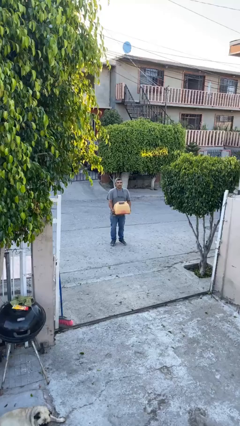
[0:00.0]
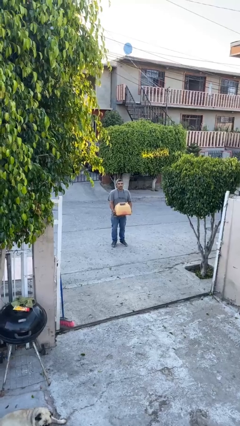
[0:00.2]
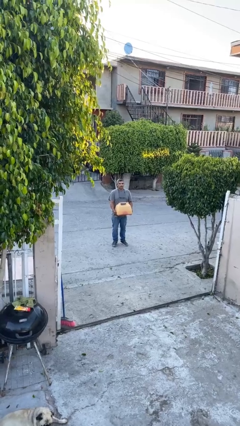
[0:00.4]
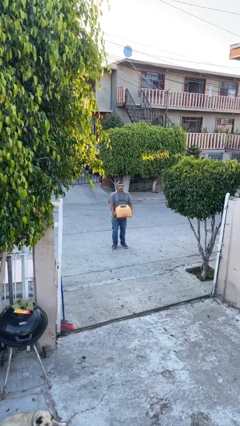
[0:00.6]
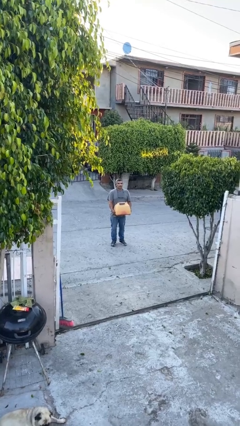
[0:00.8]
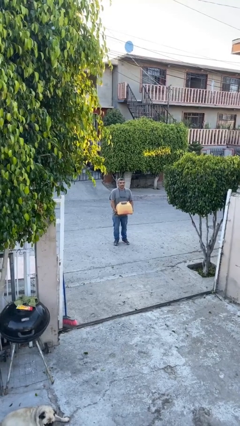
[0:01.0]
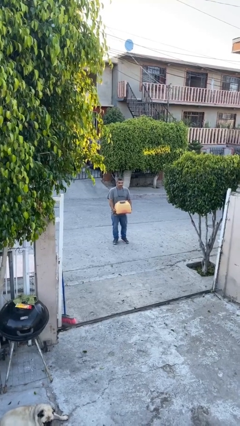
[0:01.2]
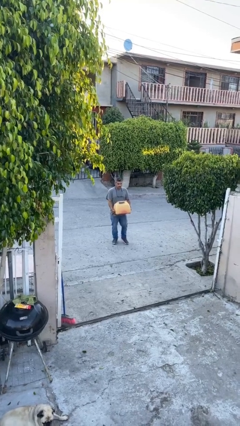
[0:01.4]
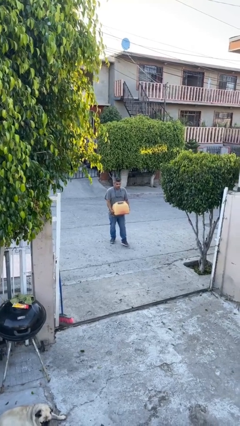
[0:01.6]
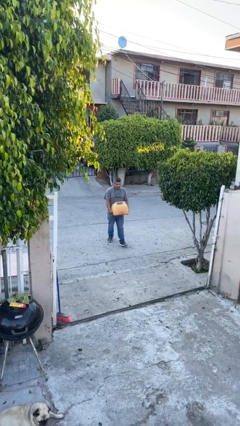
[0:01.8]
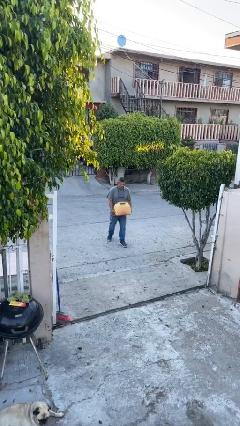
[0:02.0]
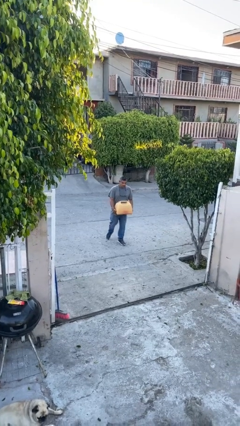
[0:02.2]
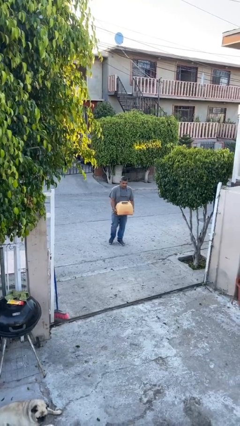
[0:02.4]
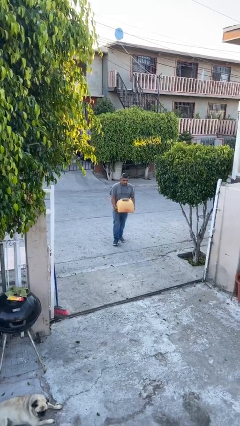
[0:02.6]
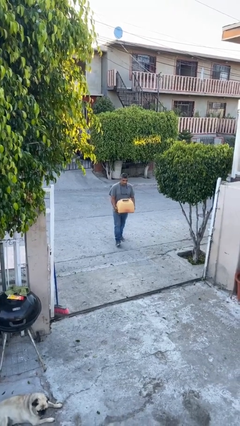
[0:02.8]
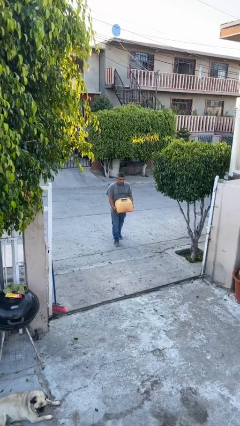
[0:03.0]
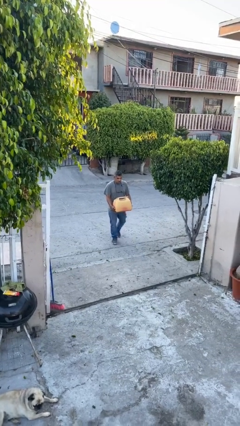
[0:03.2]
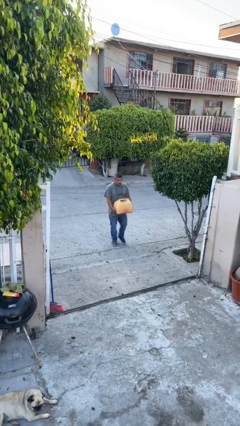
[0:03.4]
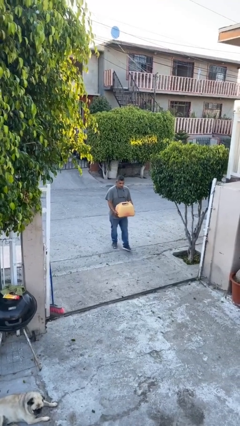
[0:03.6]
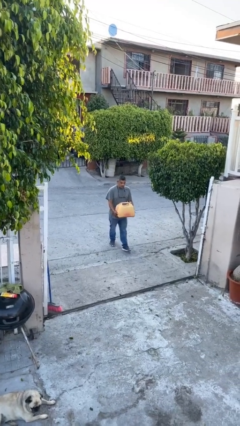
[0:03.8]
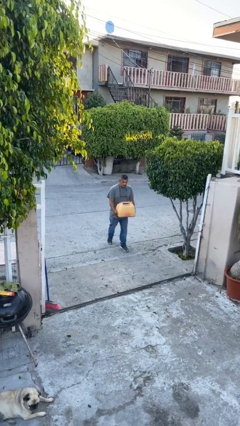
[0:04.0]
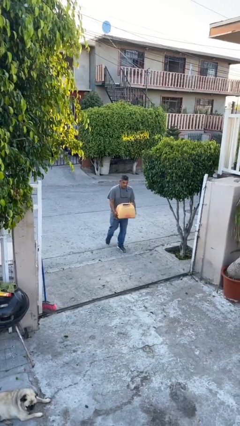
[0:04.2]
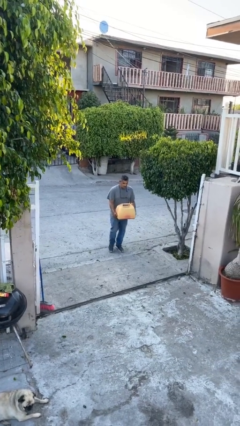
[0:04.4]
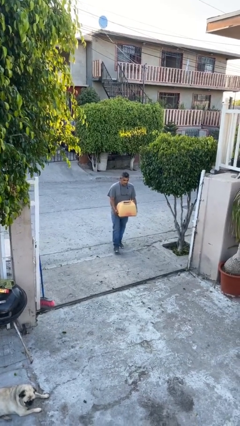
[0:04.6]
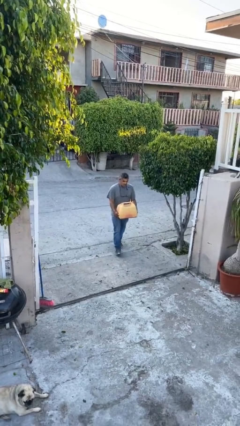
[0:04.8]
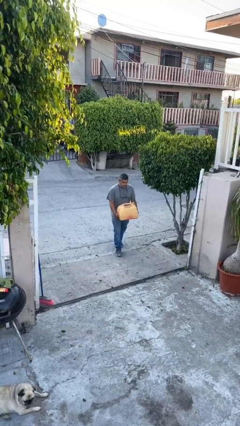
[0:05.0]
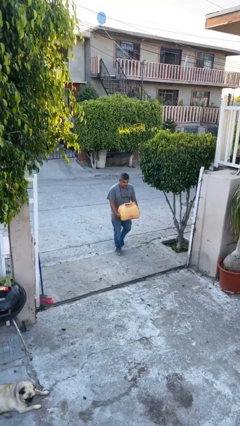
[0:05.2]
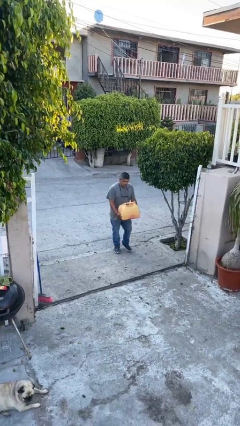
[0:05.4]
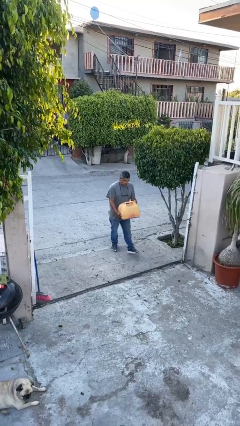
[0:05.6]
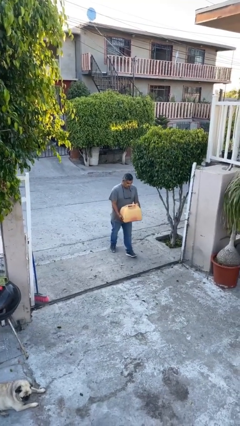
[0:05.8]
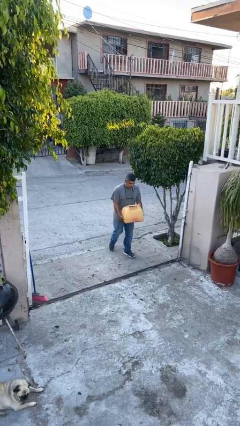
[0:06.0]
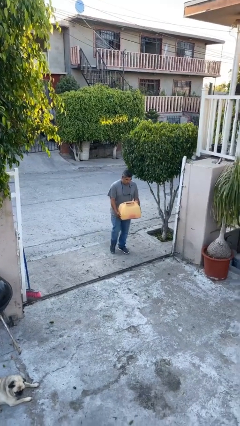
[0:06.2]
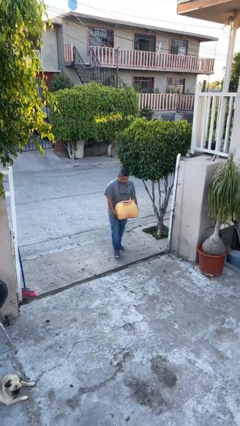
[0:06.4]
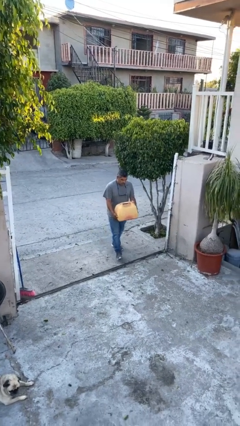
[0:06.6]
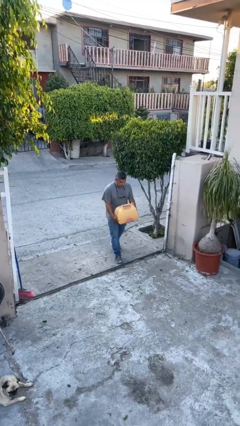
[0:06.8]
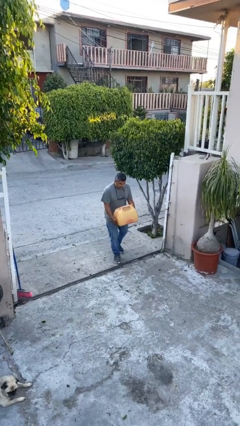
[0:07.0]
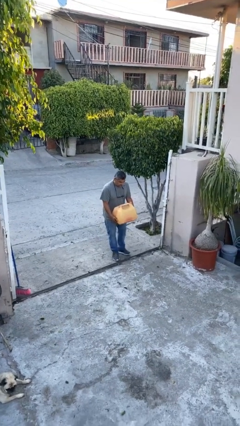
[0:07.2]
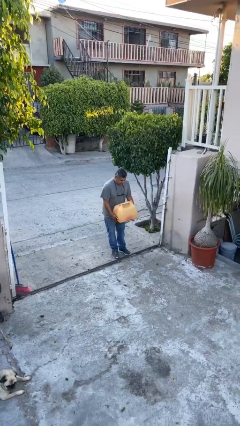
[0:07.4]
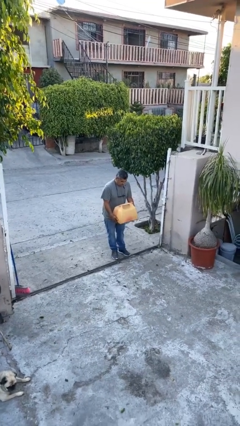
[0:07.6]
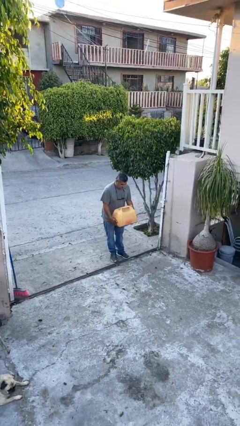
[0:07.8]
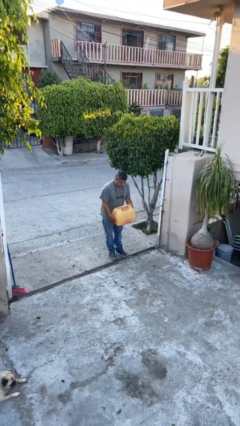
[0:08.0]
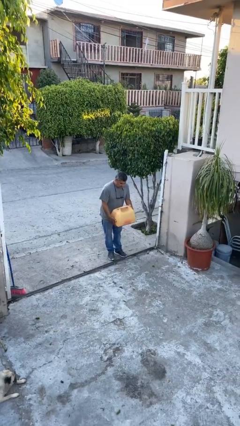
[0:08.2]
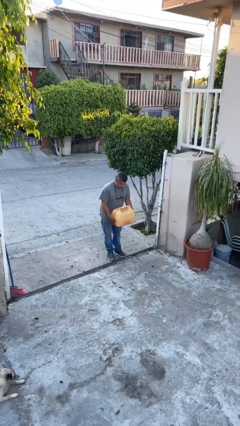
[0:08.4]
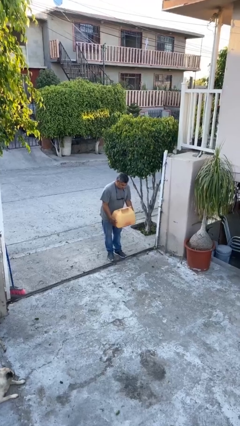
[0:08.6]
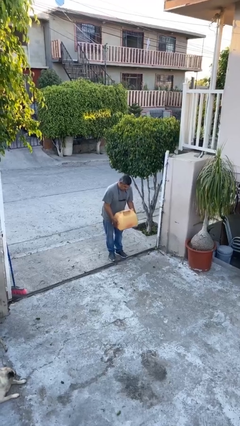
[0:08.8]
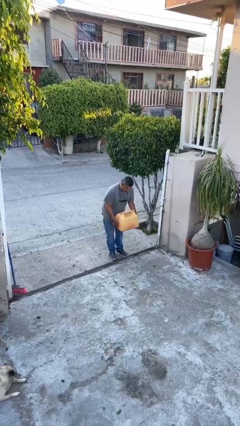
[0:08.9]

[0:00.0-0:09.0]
person carries heavy object

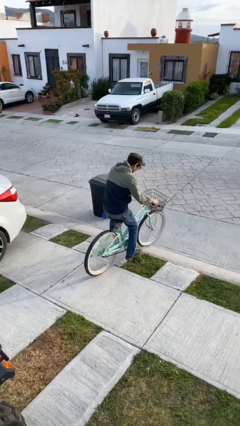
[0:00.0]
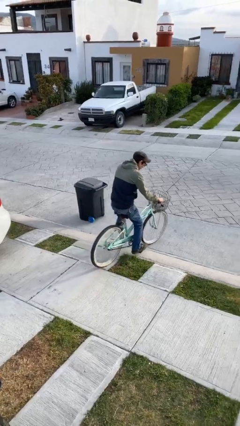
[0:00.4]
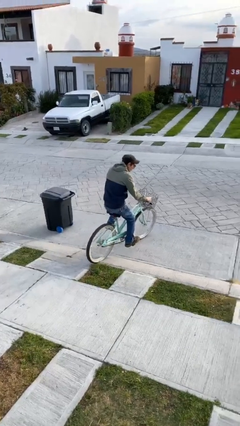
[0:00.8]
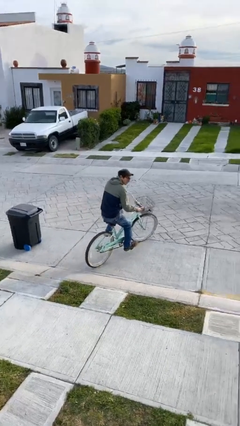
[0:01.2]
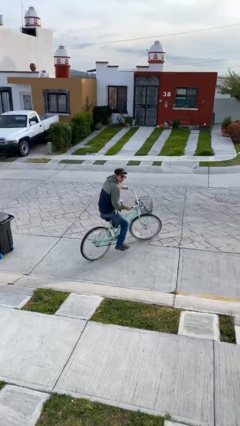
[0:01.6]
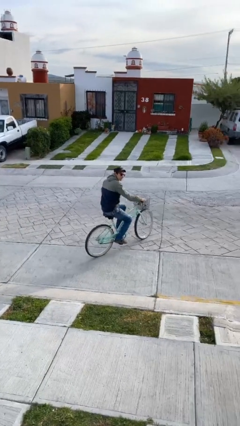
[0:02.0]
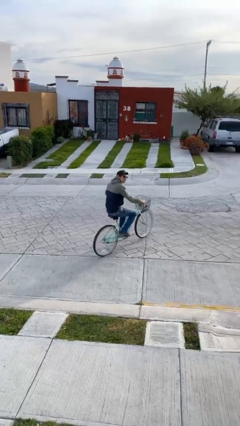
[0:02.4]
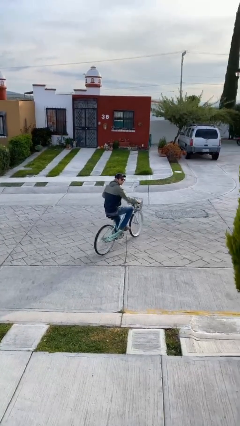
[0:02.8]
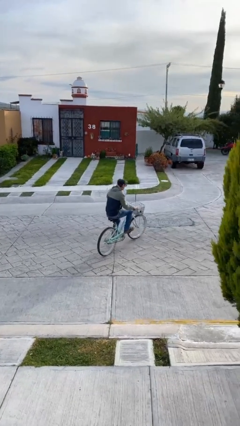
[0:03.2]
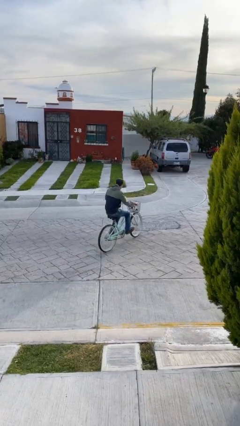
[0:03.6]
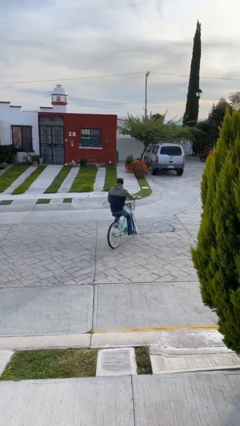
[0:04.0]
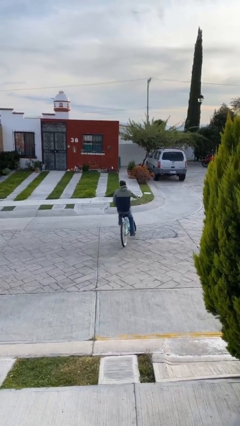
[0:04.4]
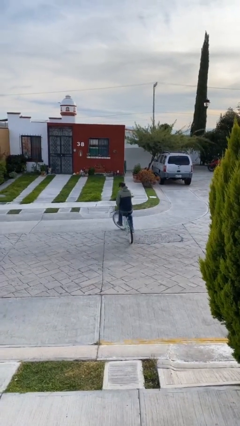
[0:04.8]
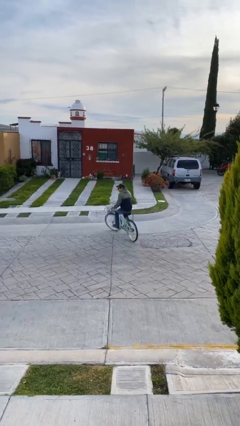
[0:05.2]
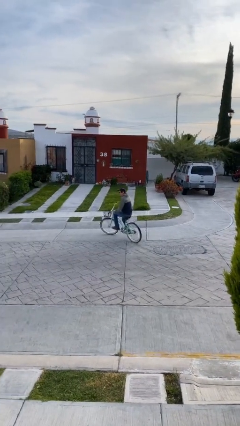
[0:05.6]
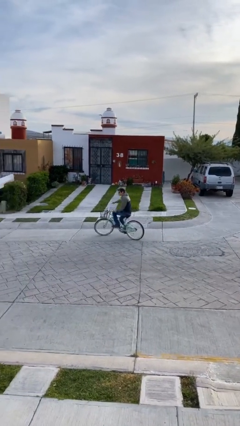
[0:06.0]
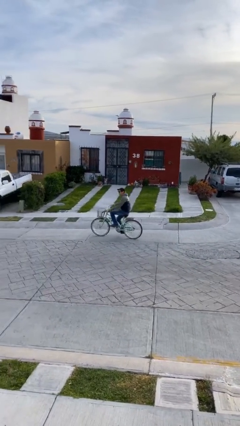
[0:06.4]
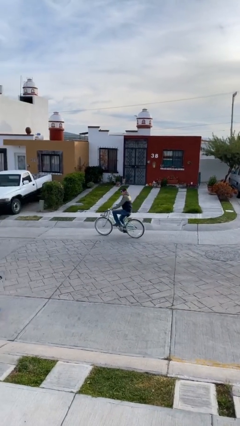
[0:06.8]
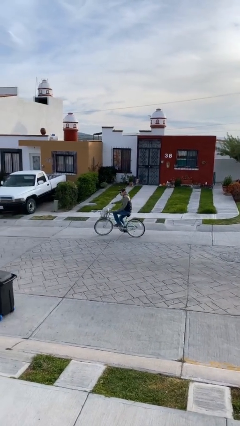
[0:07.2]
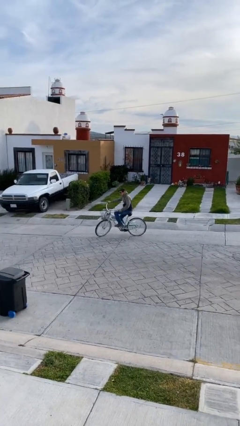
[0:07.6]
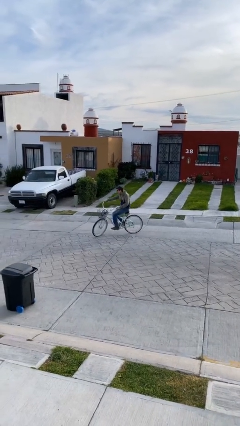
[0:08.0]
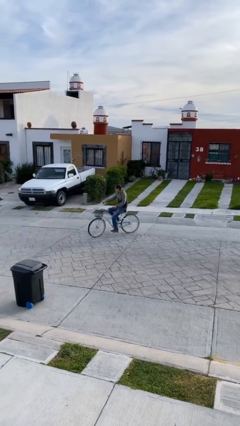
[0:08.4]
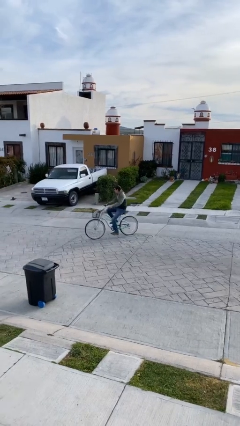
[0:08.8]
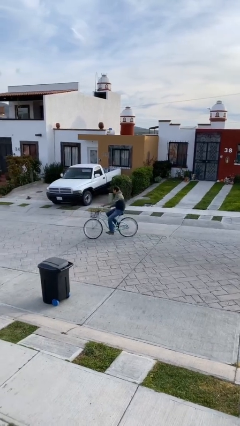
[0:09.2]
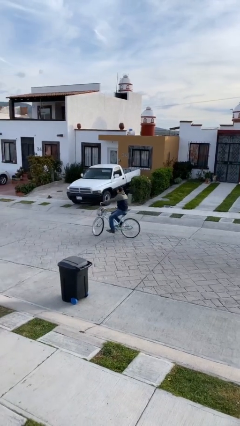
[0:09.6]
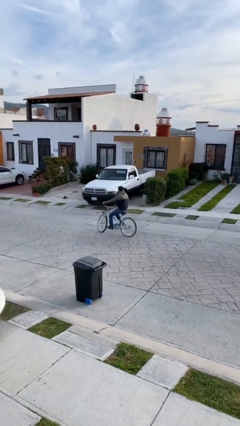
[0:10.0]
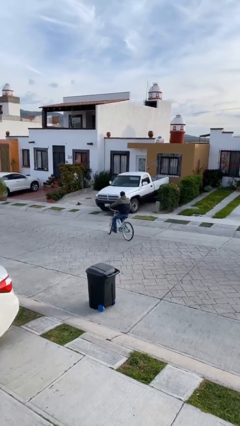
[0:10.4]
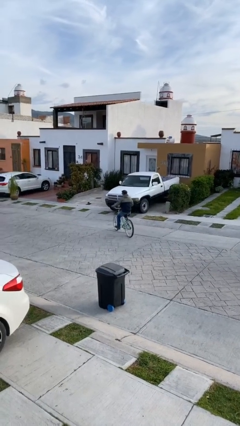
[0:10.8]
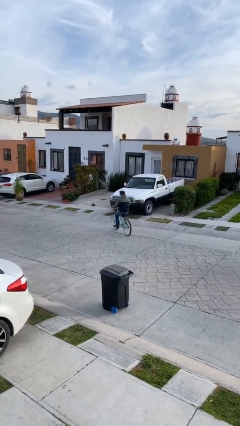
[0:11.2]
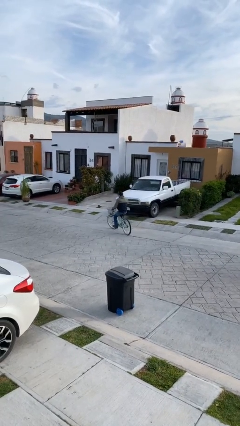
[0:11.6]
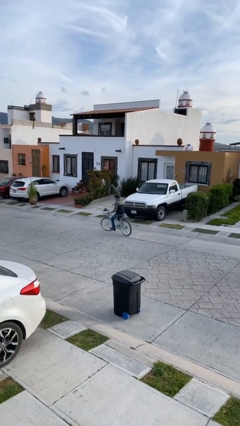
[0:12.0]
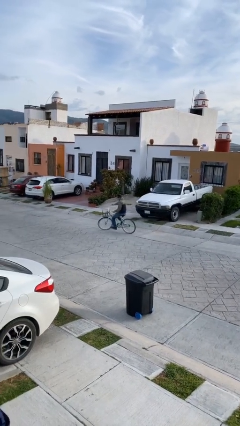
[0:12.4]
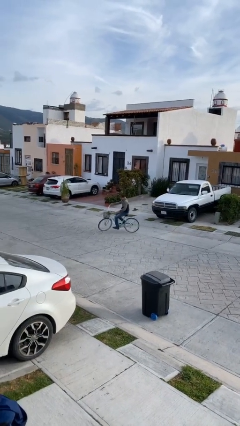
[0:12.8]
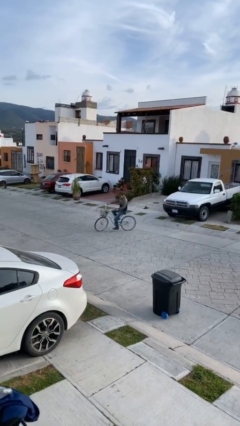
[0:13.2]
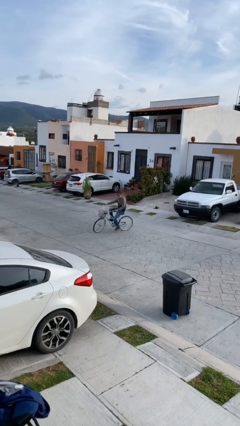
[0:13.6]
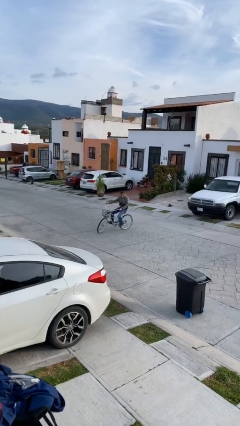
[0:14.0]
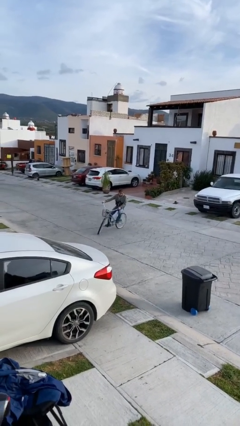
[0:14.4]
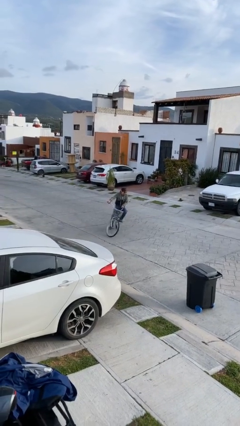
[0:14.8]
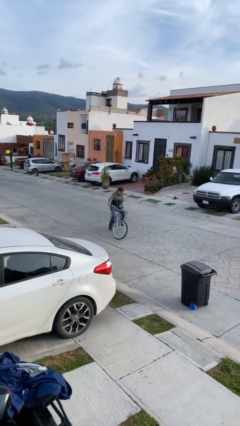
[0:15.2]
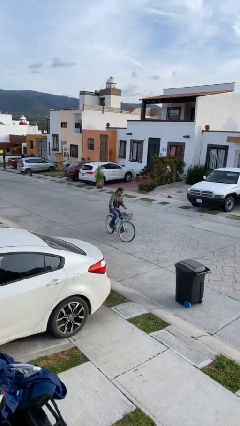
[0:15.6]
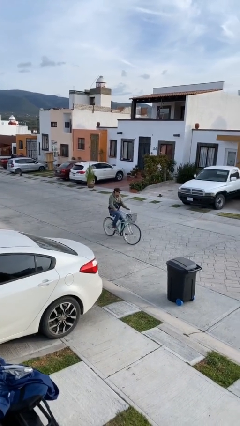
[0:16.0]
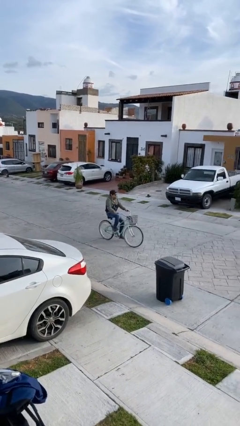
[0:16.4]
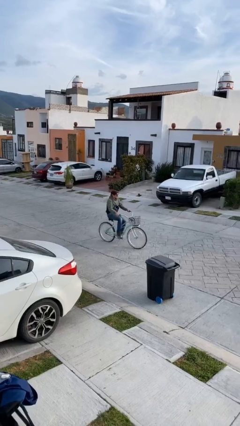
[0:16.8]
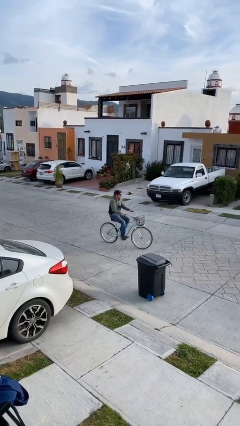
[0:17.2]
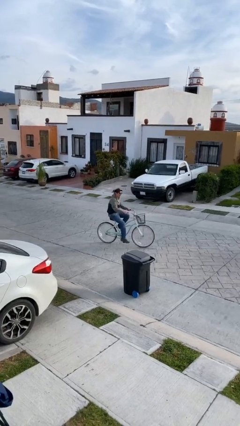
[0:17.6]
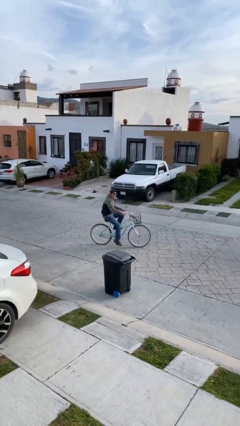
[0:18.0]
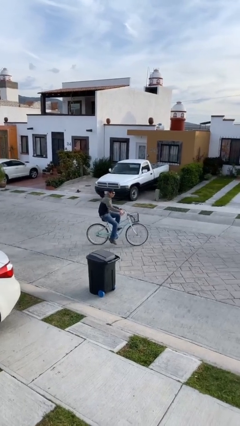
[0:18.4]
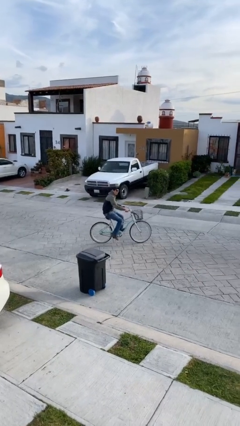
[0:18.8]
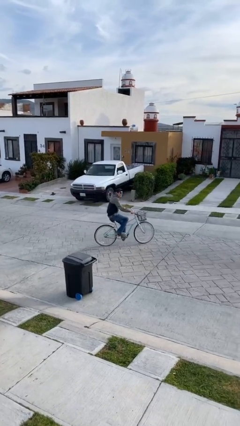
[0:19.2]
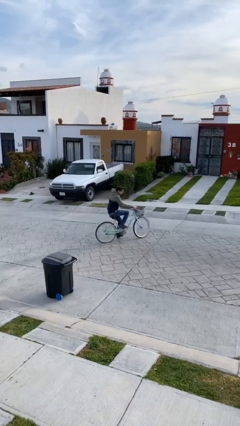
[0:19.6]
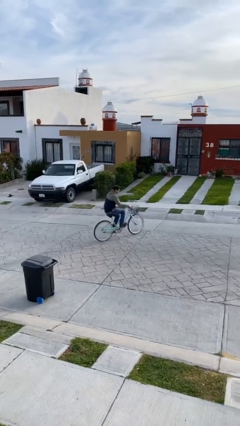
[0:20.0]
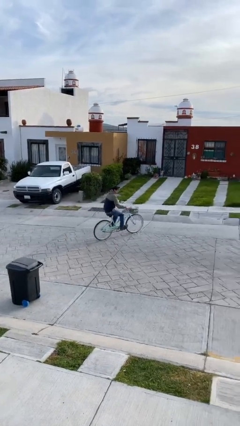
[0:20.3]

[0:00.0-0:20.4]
person rides bicycle
